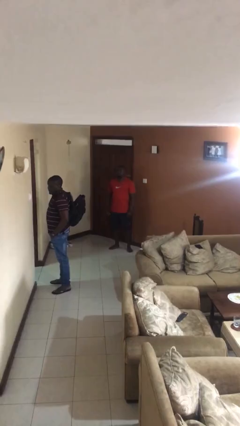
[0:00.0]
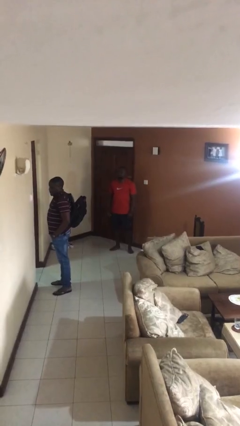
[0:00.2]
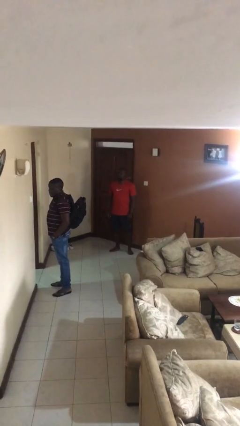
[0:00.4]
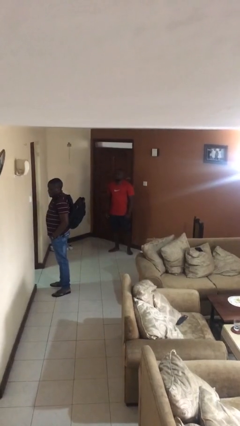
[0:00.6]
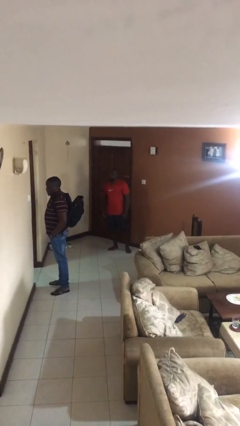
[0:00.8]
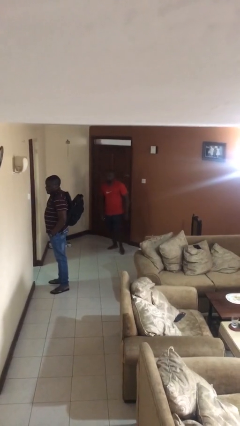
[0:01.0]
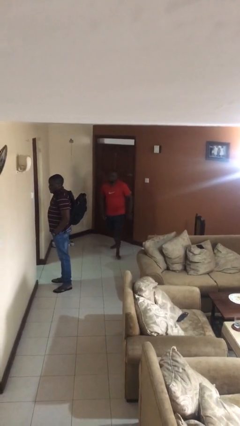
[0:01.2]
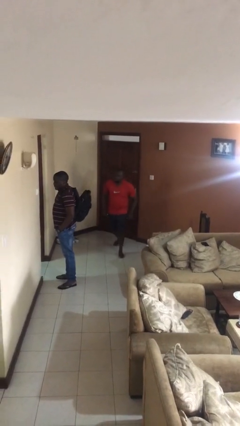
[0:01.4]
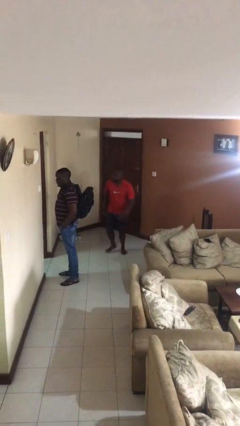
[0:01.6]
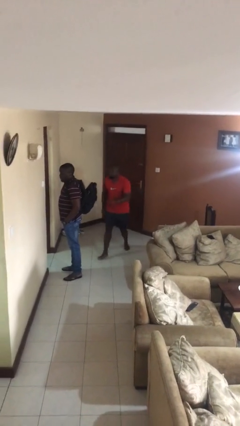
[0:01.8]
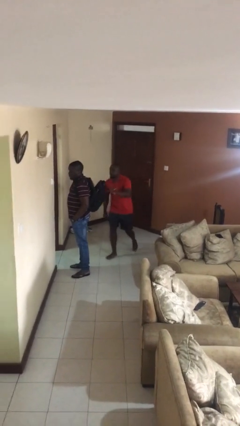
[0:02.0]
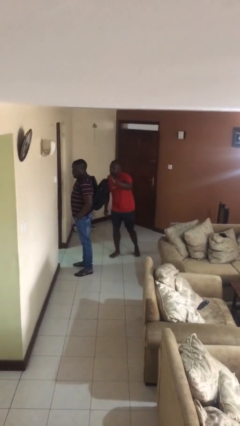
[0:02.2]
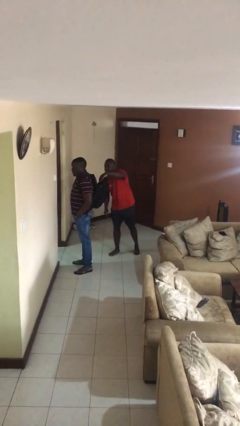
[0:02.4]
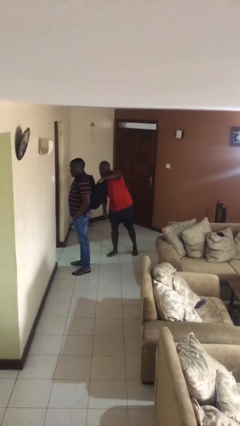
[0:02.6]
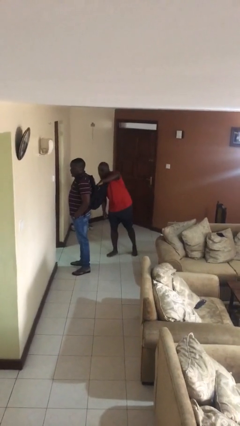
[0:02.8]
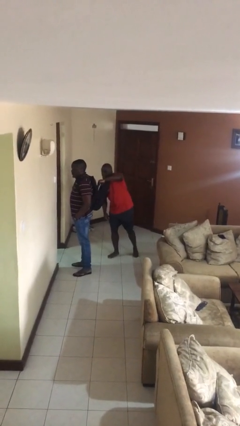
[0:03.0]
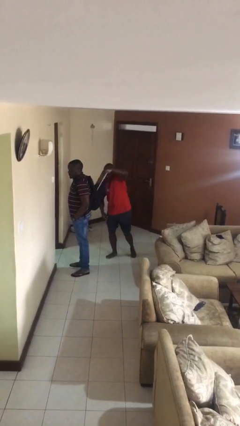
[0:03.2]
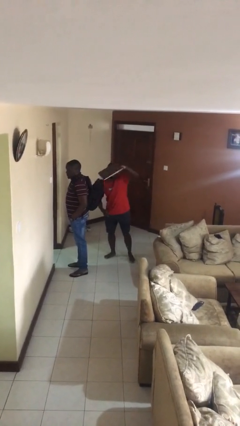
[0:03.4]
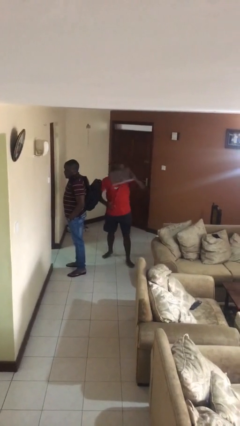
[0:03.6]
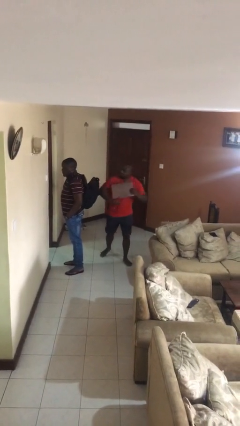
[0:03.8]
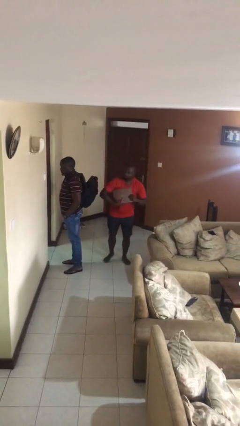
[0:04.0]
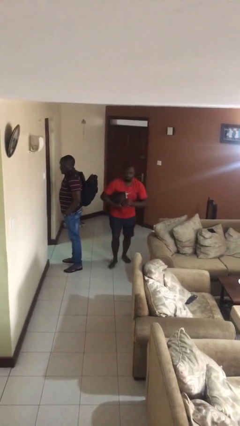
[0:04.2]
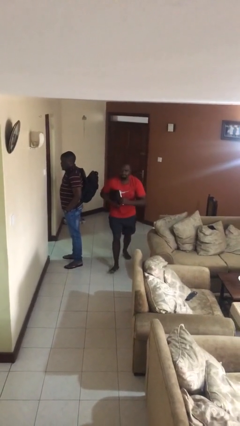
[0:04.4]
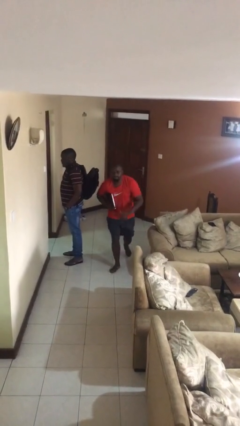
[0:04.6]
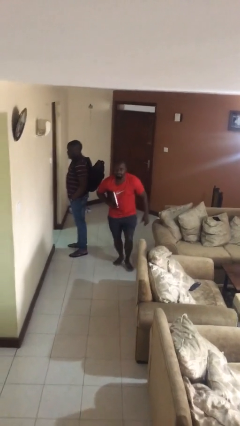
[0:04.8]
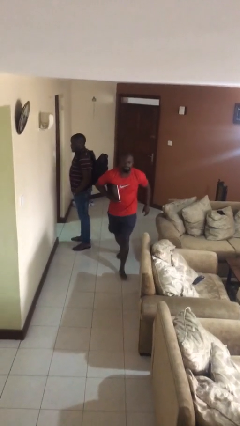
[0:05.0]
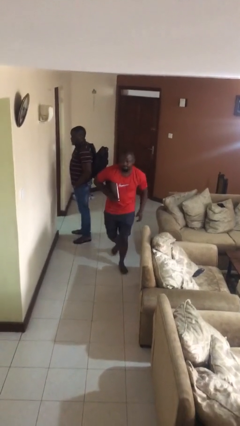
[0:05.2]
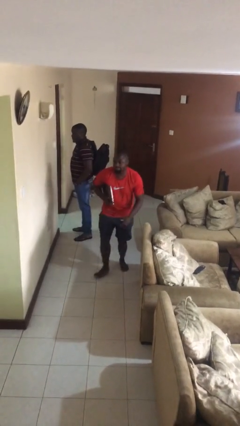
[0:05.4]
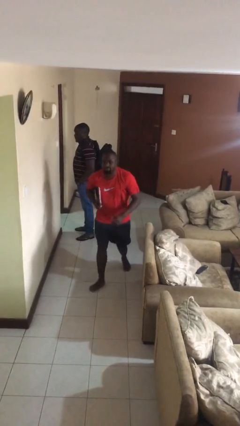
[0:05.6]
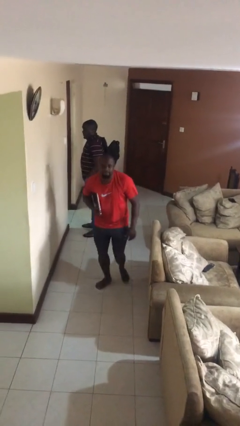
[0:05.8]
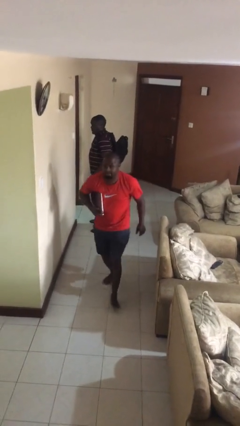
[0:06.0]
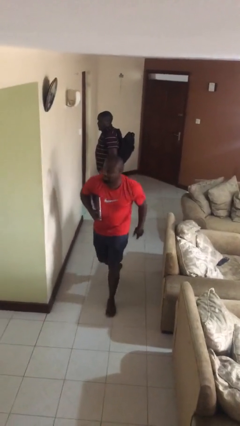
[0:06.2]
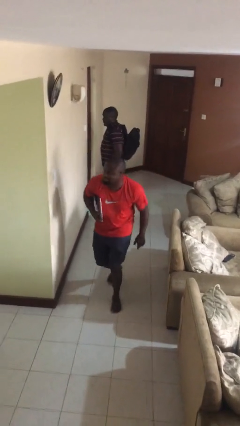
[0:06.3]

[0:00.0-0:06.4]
person steals object from person

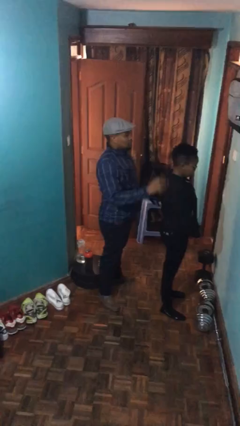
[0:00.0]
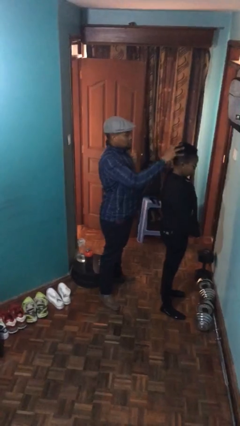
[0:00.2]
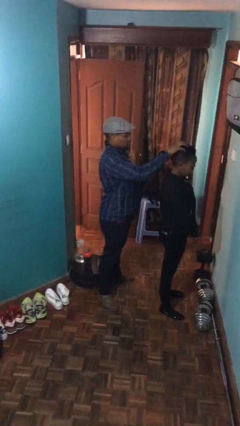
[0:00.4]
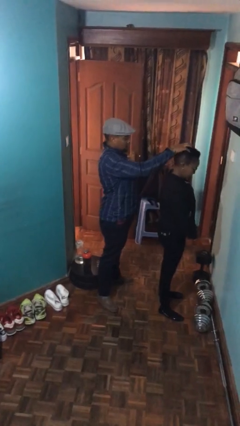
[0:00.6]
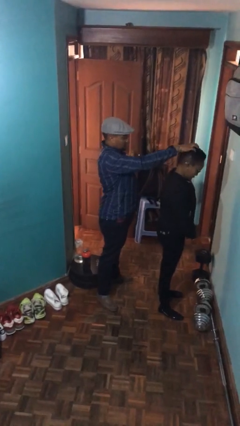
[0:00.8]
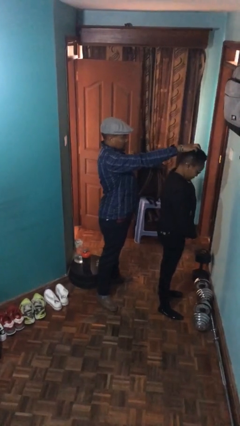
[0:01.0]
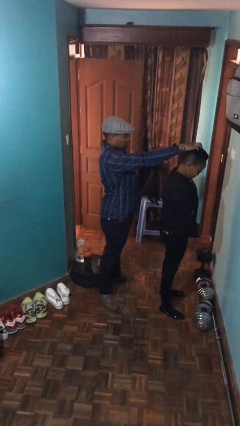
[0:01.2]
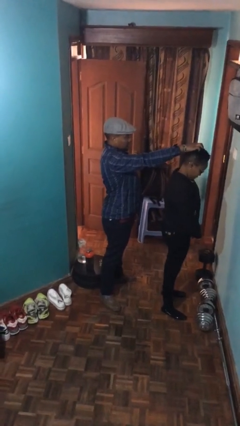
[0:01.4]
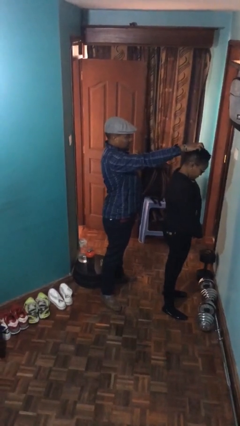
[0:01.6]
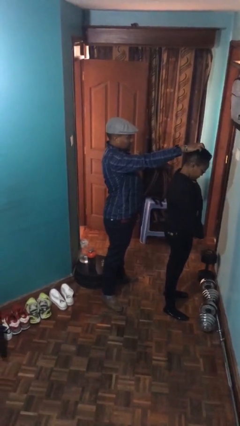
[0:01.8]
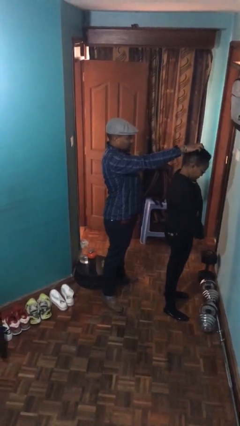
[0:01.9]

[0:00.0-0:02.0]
person grabs person by hair

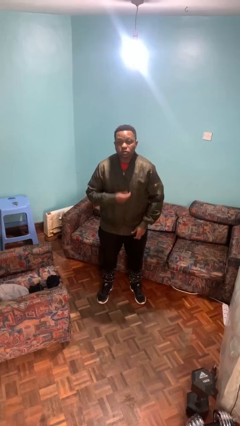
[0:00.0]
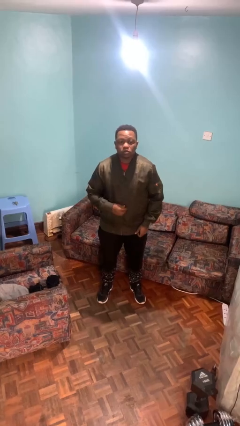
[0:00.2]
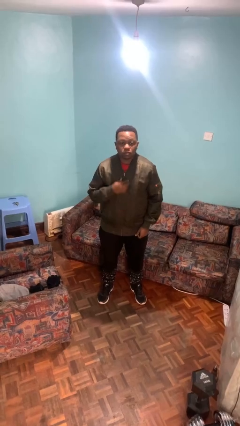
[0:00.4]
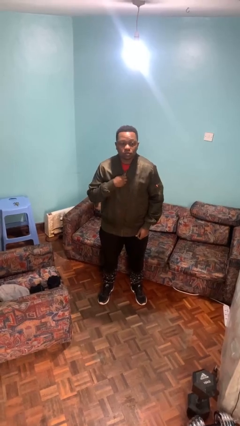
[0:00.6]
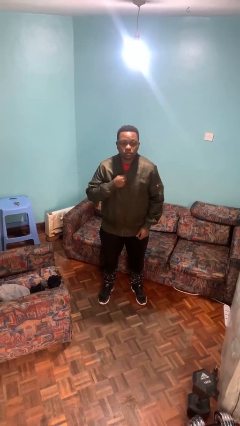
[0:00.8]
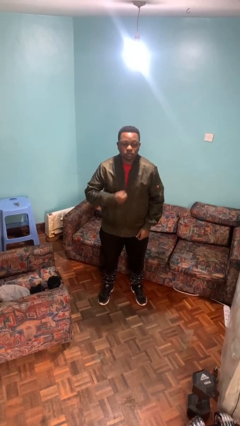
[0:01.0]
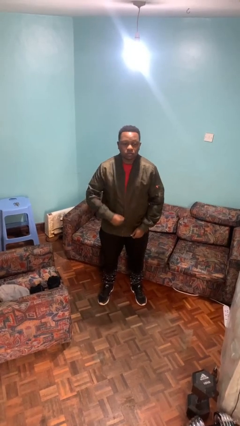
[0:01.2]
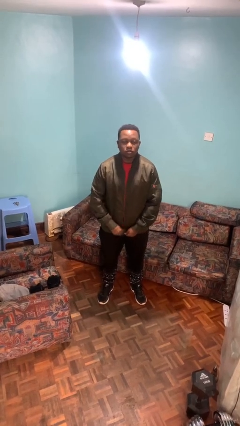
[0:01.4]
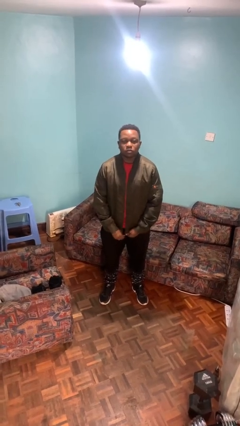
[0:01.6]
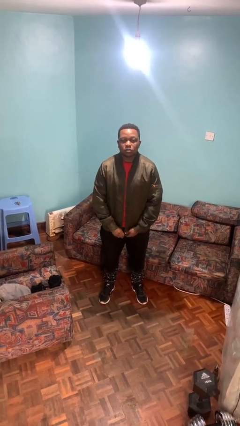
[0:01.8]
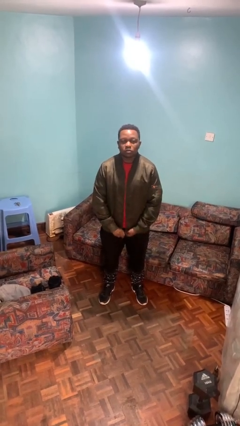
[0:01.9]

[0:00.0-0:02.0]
person unzips jacket

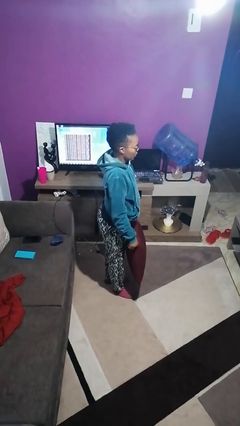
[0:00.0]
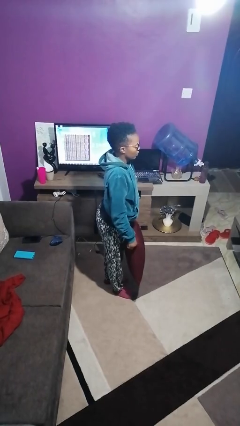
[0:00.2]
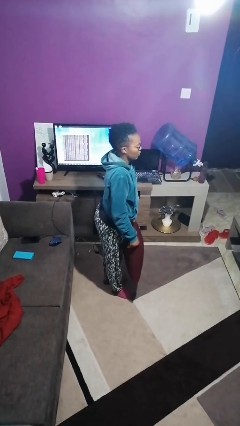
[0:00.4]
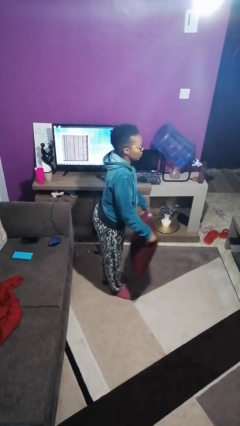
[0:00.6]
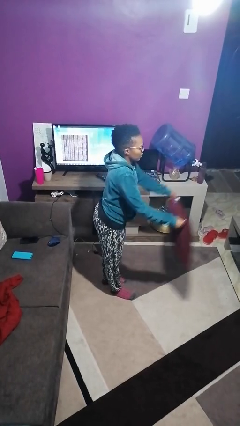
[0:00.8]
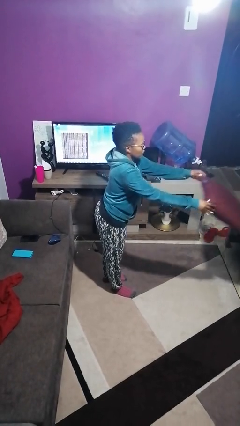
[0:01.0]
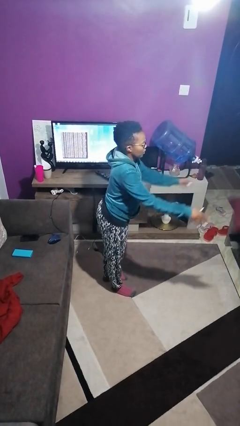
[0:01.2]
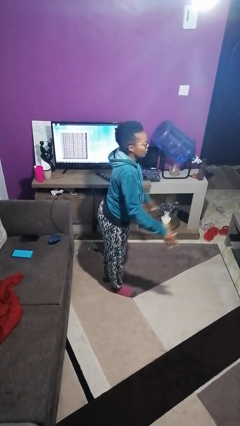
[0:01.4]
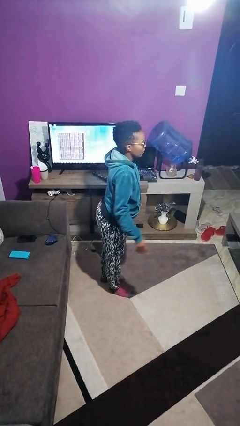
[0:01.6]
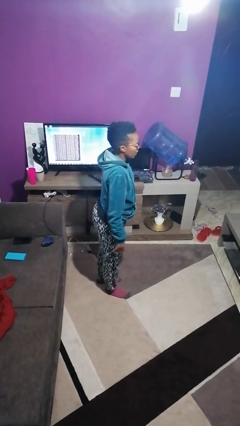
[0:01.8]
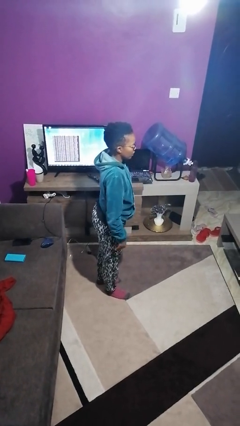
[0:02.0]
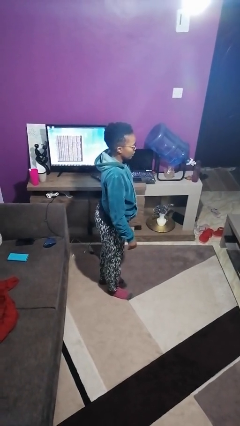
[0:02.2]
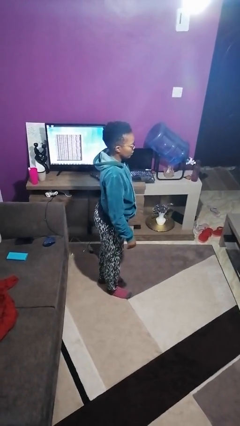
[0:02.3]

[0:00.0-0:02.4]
person throws object on table

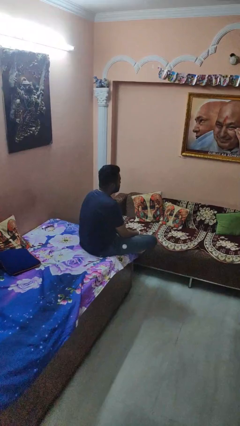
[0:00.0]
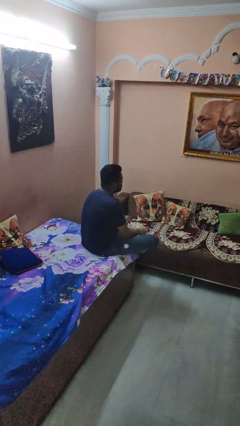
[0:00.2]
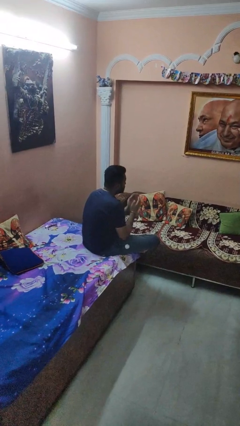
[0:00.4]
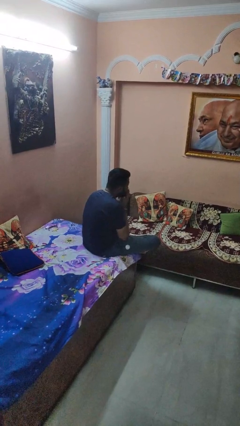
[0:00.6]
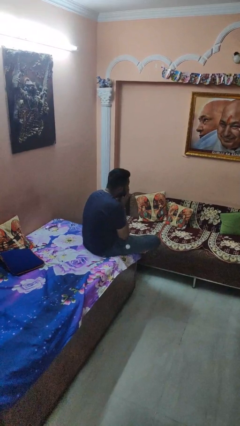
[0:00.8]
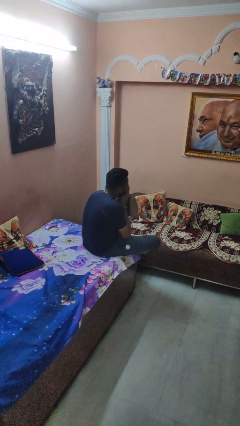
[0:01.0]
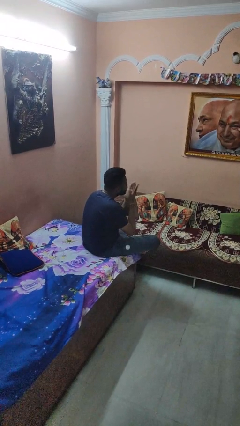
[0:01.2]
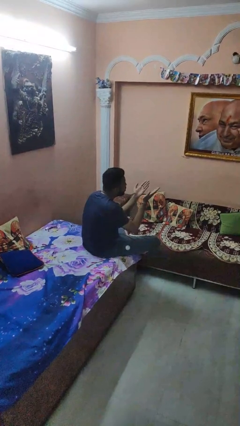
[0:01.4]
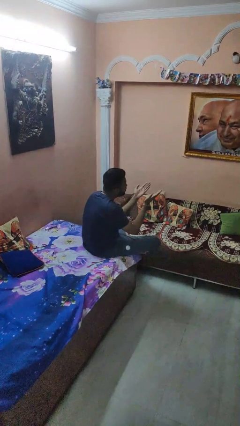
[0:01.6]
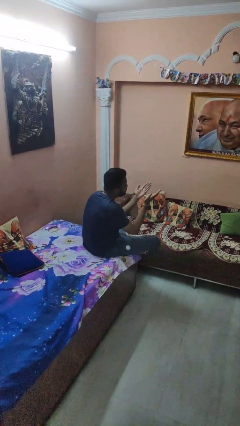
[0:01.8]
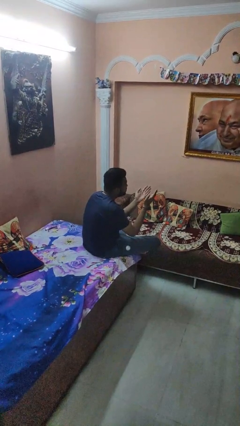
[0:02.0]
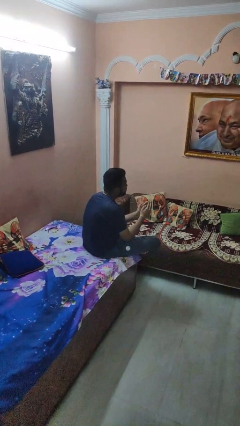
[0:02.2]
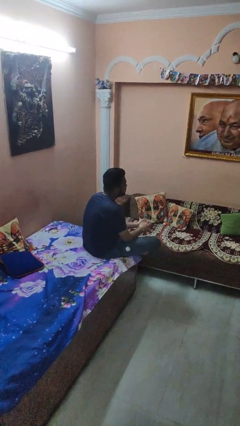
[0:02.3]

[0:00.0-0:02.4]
person gestures blow kiss

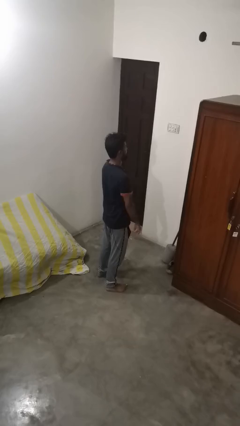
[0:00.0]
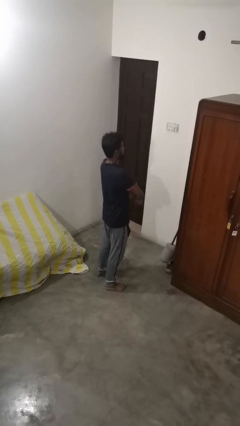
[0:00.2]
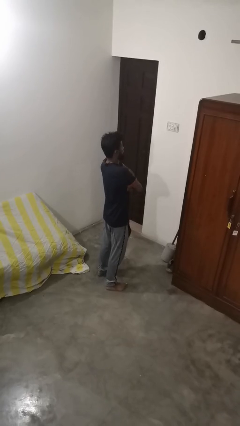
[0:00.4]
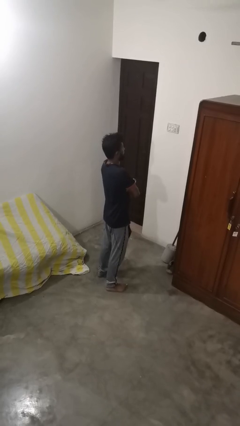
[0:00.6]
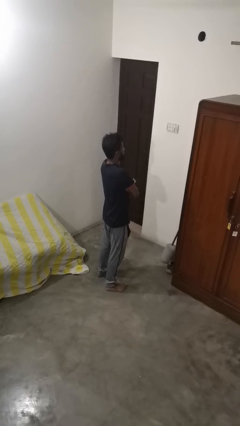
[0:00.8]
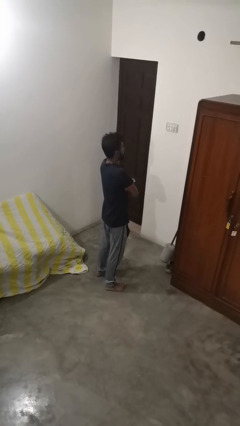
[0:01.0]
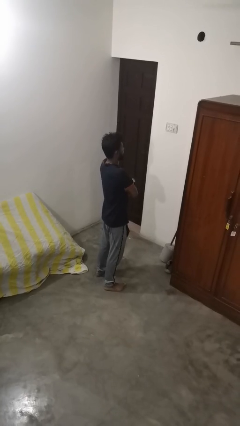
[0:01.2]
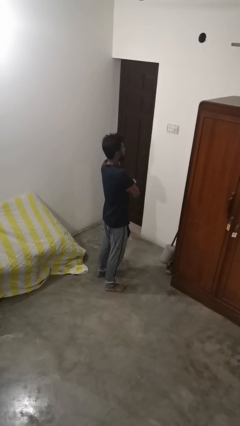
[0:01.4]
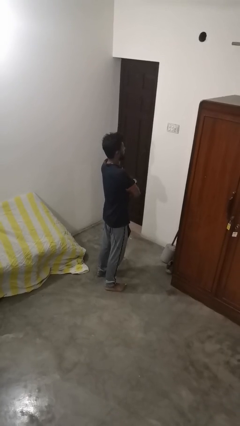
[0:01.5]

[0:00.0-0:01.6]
person crosses arms

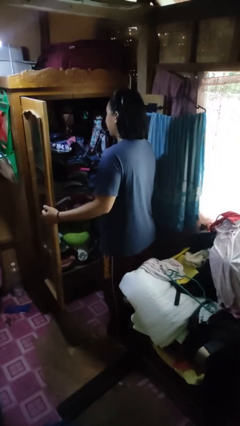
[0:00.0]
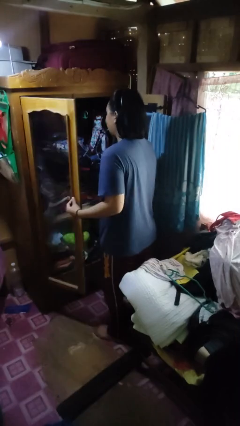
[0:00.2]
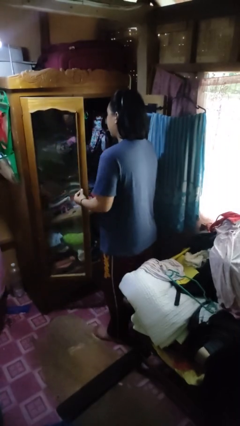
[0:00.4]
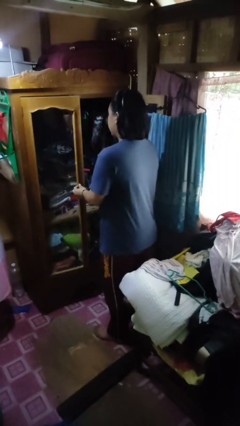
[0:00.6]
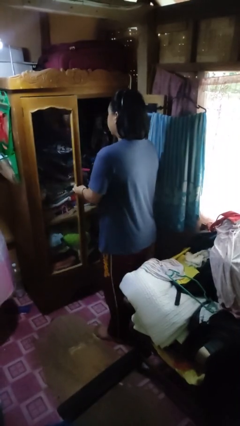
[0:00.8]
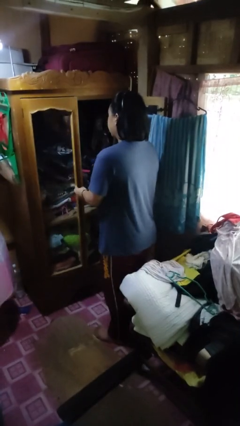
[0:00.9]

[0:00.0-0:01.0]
person closes closet door
